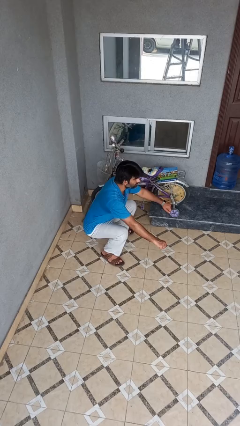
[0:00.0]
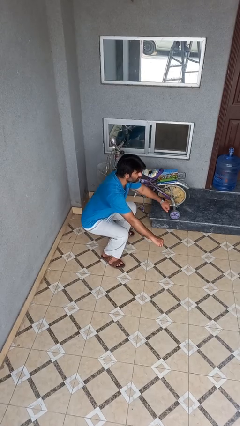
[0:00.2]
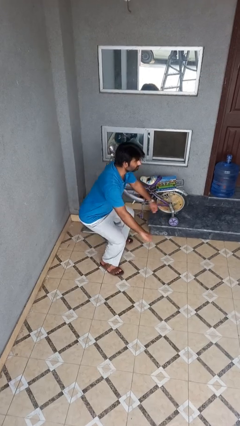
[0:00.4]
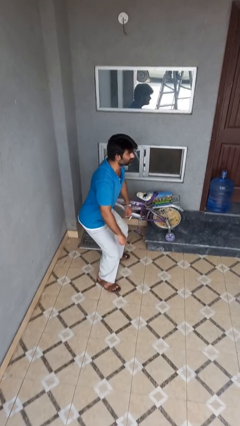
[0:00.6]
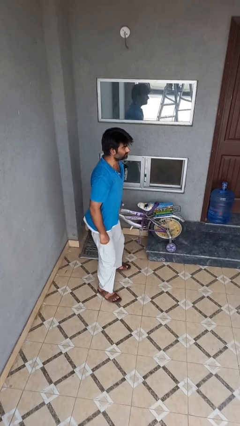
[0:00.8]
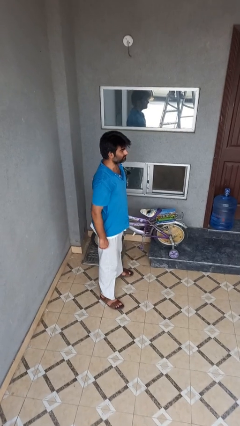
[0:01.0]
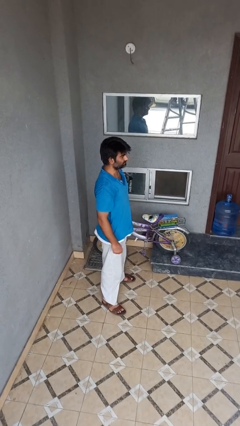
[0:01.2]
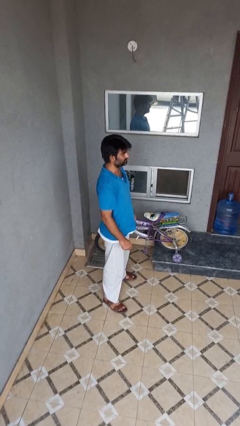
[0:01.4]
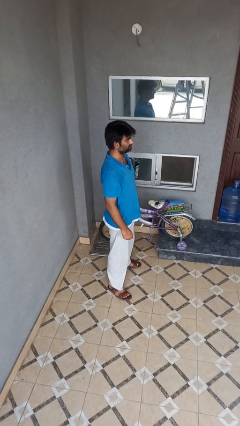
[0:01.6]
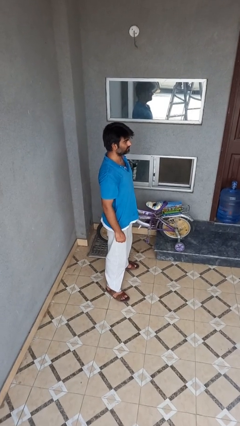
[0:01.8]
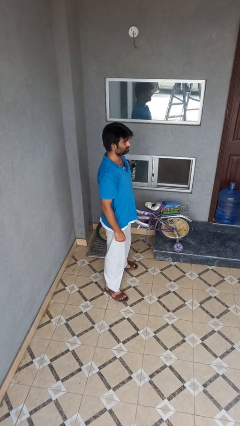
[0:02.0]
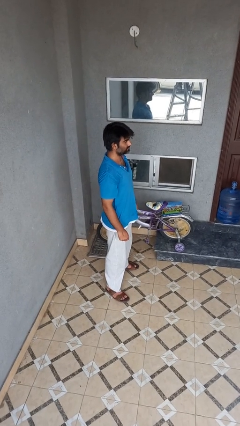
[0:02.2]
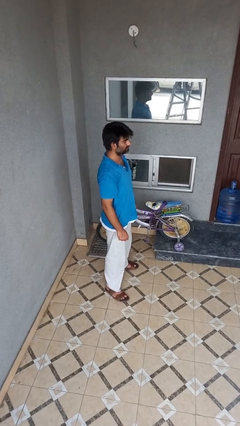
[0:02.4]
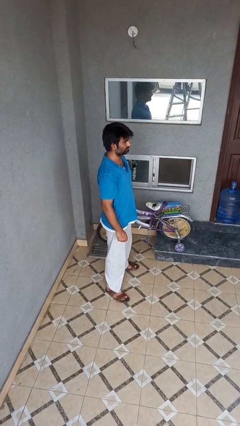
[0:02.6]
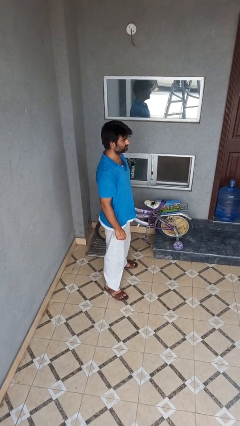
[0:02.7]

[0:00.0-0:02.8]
person stands up

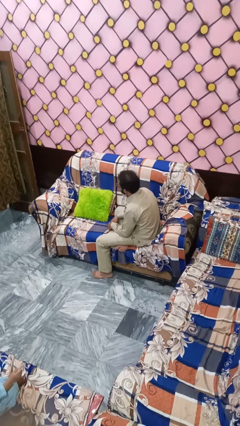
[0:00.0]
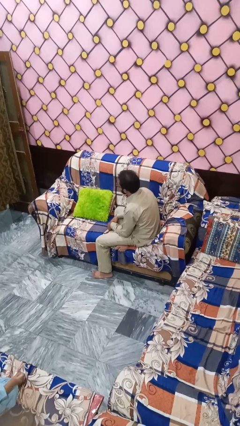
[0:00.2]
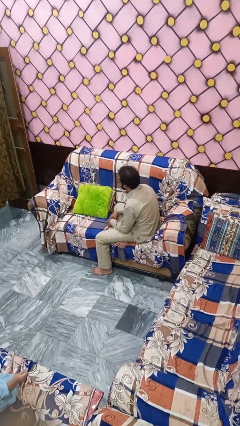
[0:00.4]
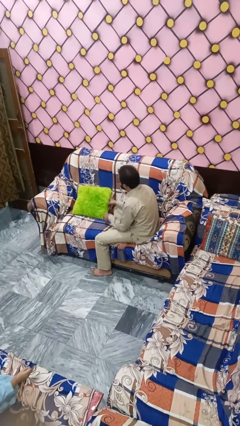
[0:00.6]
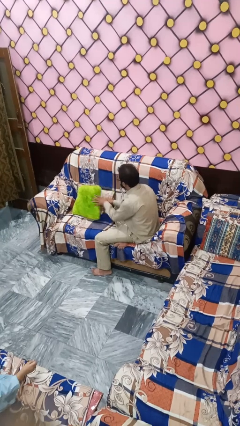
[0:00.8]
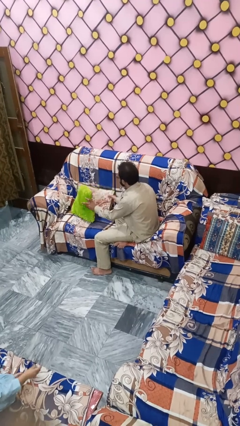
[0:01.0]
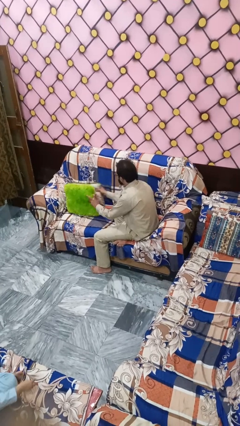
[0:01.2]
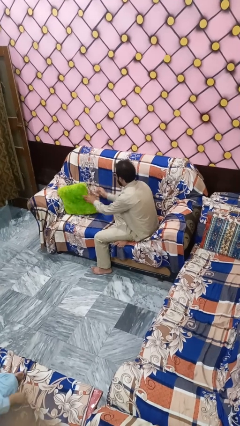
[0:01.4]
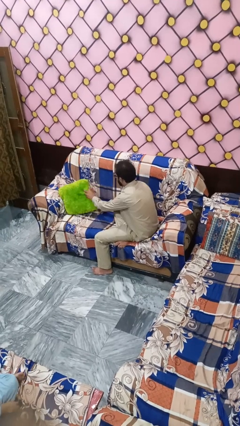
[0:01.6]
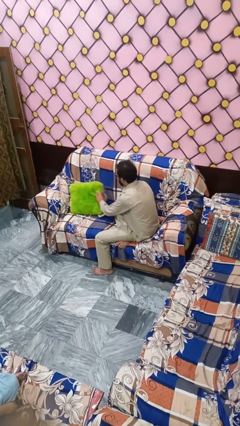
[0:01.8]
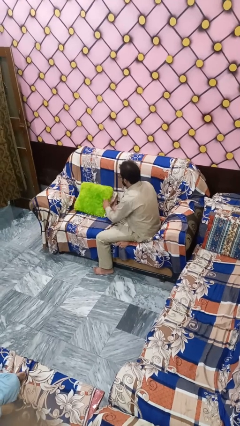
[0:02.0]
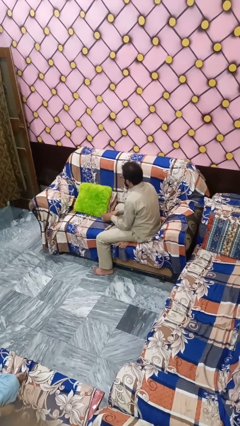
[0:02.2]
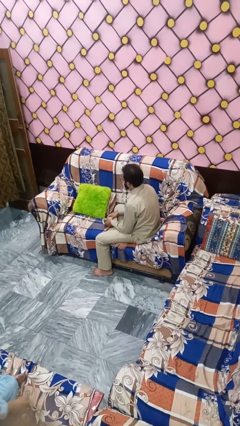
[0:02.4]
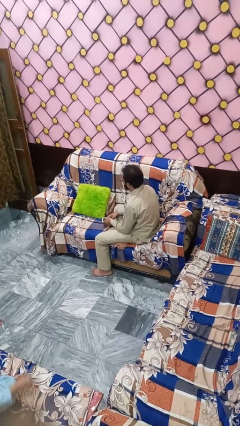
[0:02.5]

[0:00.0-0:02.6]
person searches in couch

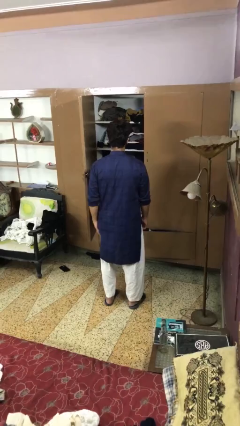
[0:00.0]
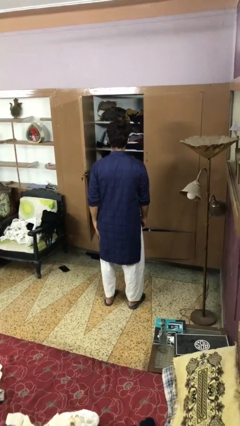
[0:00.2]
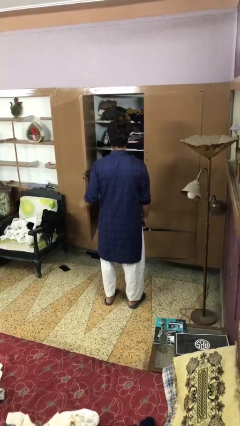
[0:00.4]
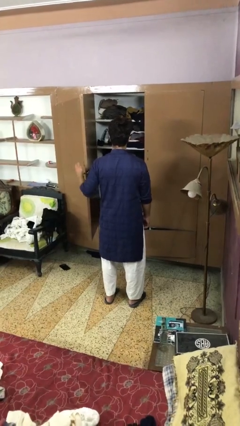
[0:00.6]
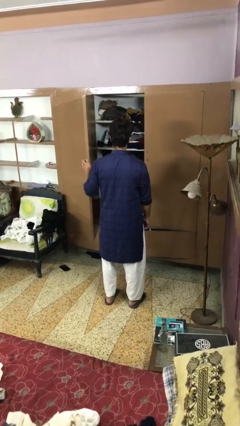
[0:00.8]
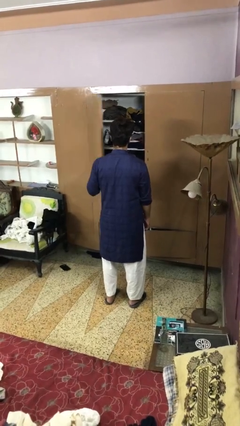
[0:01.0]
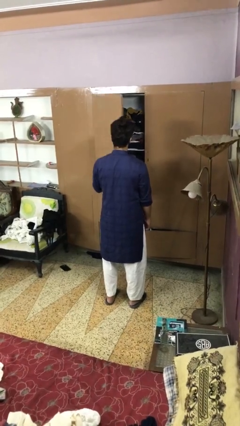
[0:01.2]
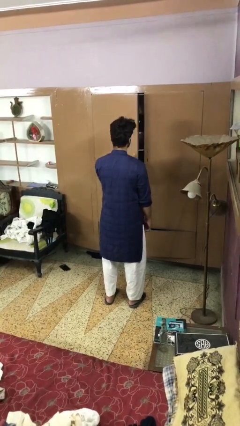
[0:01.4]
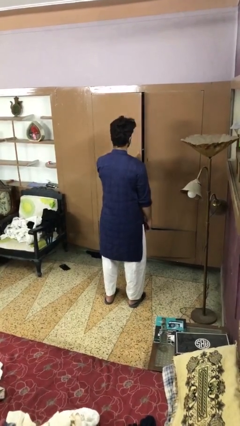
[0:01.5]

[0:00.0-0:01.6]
person closes closet door

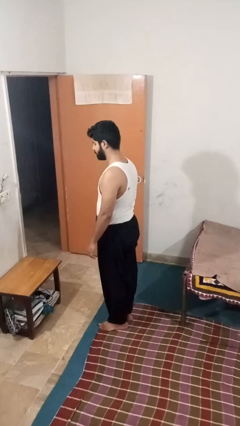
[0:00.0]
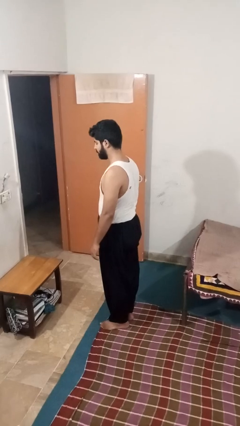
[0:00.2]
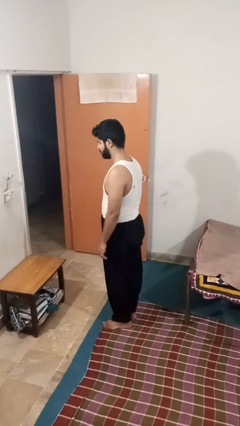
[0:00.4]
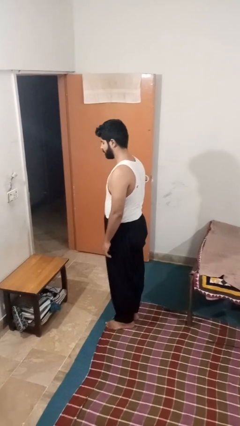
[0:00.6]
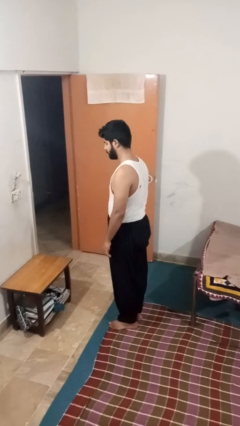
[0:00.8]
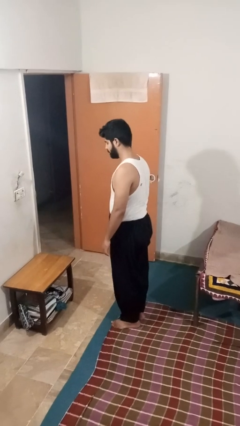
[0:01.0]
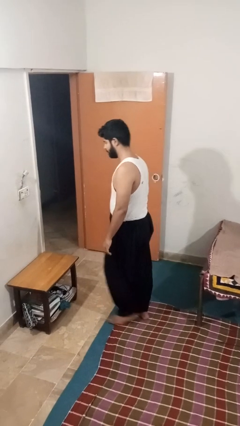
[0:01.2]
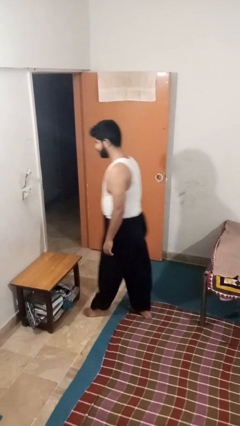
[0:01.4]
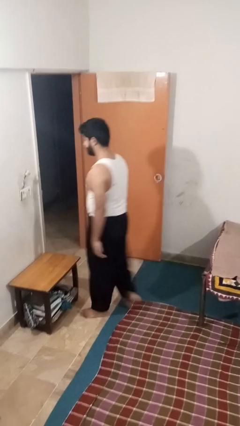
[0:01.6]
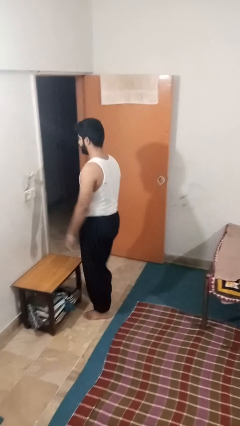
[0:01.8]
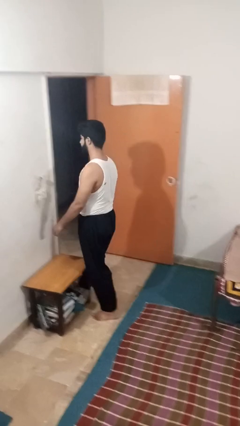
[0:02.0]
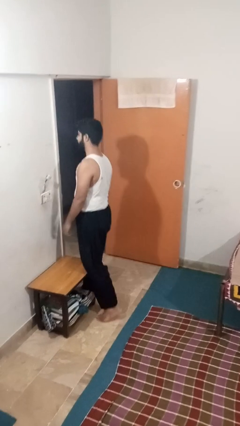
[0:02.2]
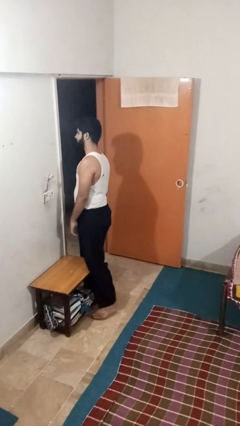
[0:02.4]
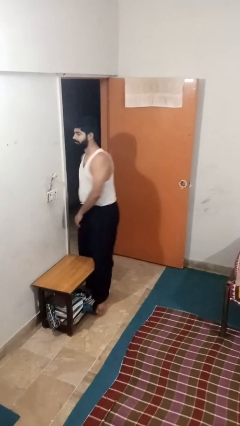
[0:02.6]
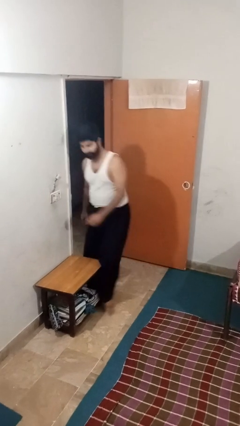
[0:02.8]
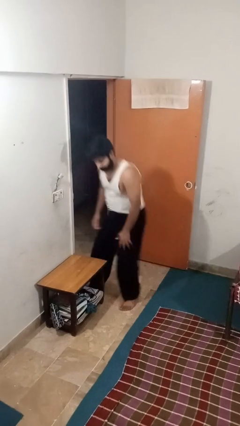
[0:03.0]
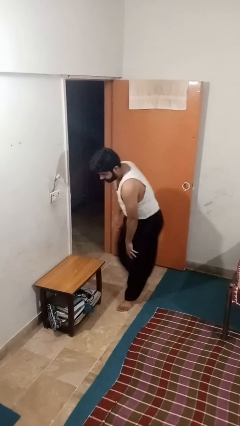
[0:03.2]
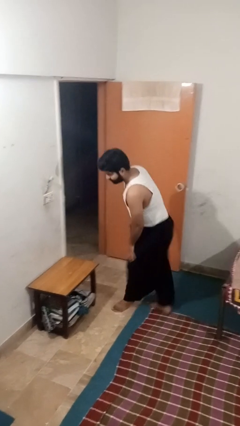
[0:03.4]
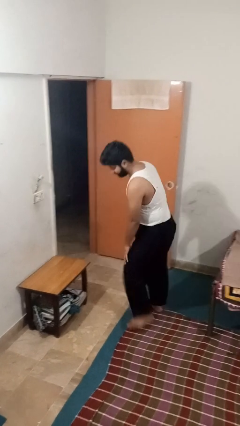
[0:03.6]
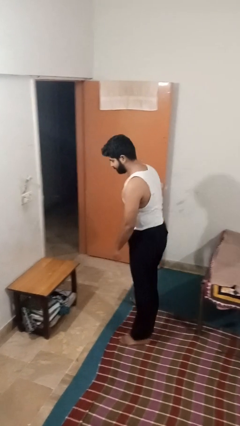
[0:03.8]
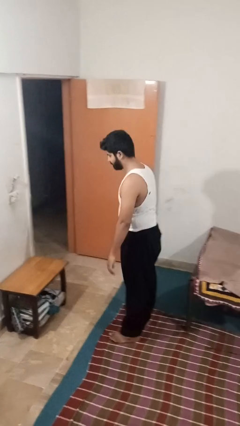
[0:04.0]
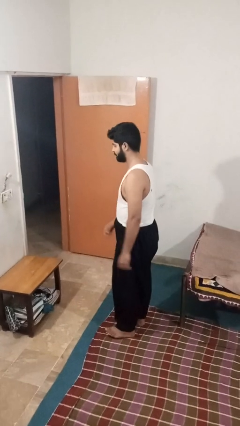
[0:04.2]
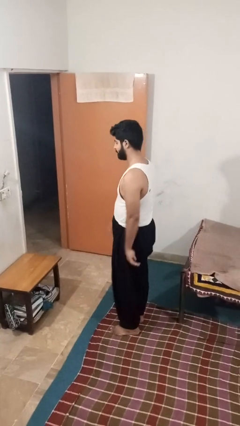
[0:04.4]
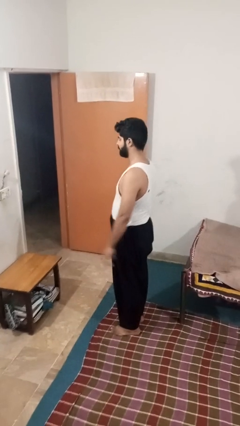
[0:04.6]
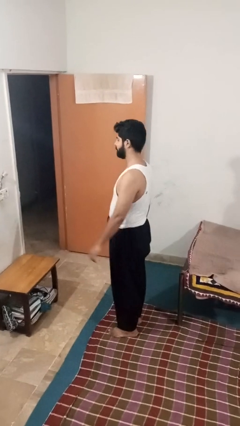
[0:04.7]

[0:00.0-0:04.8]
person bumps into table

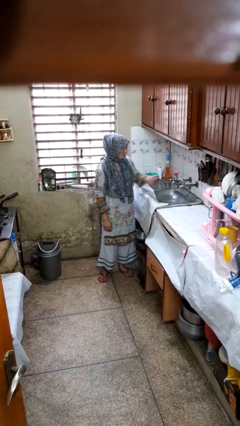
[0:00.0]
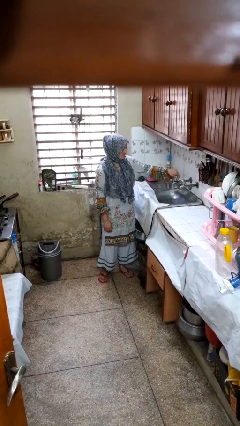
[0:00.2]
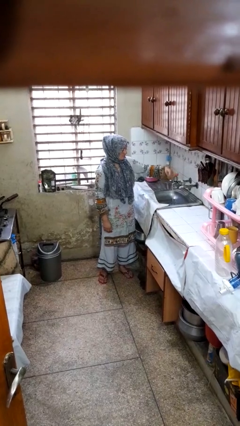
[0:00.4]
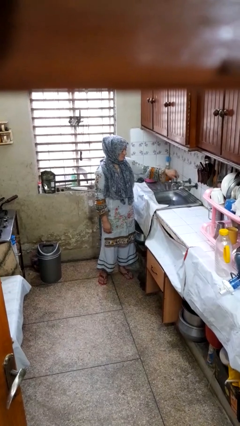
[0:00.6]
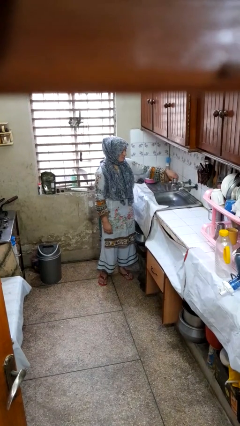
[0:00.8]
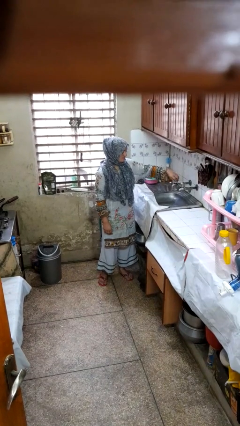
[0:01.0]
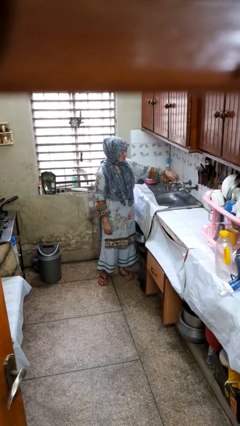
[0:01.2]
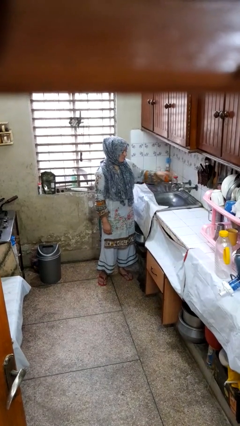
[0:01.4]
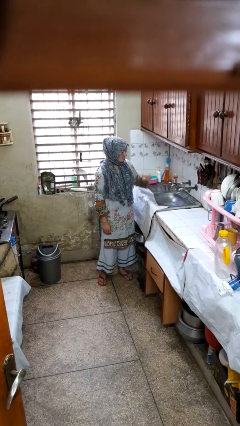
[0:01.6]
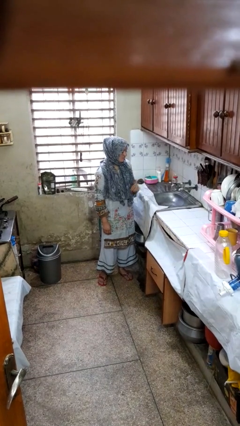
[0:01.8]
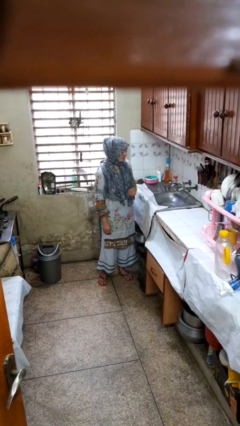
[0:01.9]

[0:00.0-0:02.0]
person turns off faucet

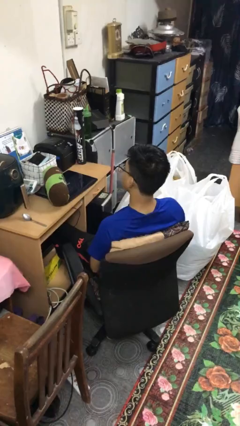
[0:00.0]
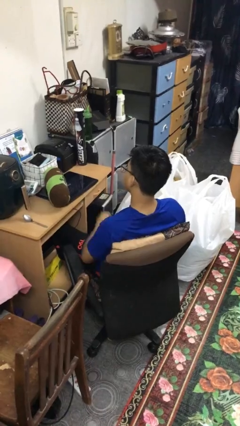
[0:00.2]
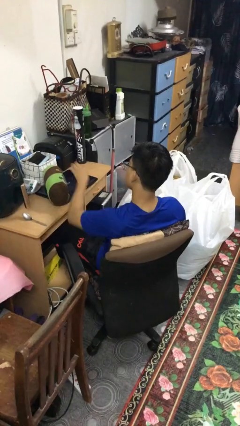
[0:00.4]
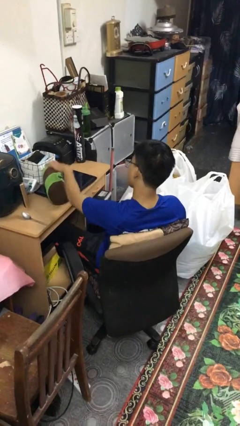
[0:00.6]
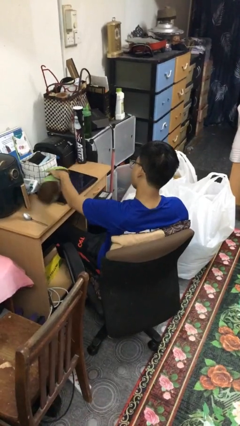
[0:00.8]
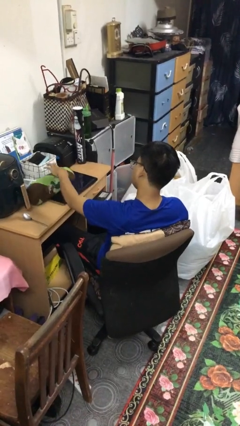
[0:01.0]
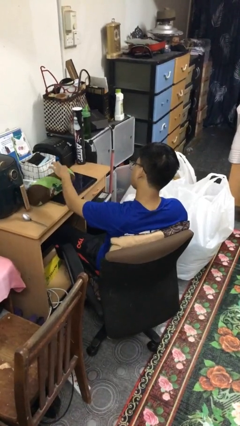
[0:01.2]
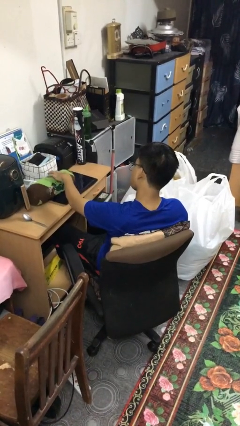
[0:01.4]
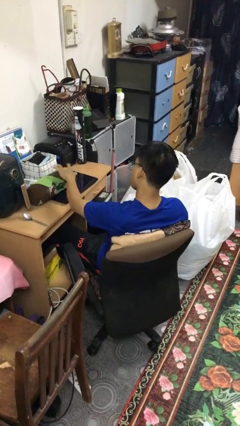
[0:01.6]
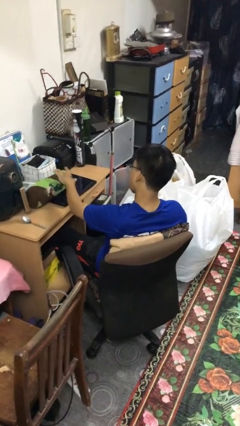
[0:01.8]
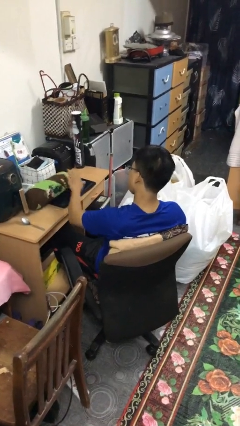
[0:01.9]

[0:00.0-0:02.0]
person taps object with finger

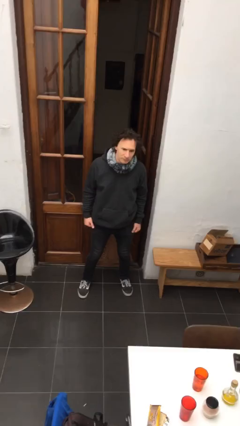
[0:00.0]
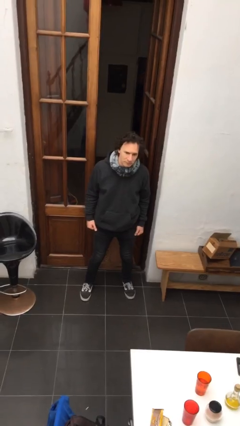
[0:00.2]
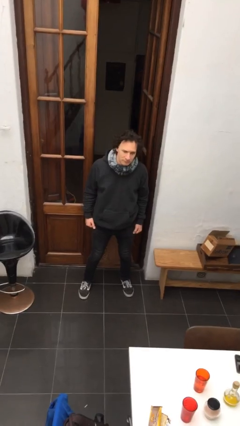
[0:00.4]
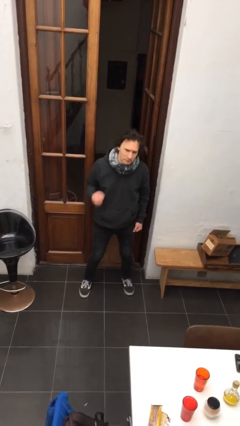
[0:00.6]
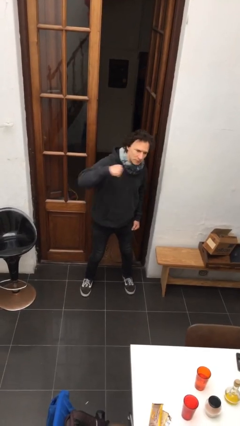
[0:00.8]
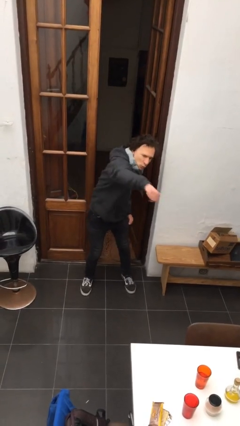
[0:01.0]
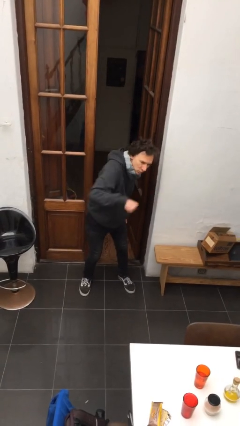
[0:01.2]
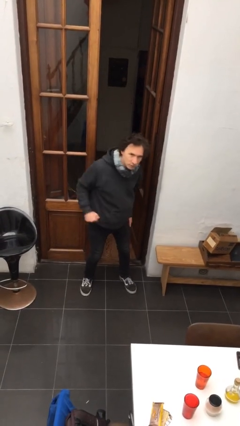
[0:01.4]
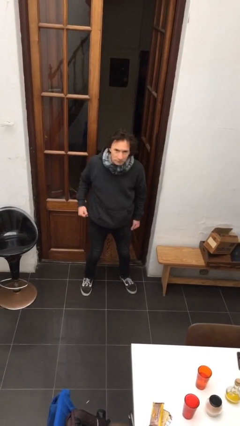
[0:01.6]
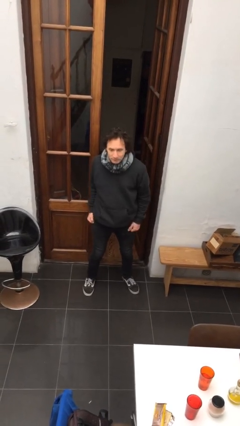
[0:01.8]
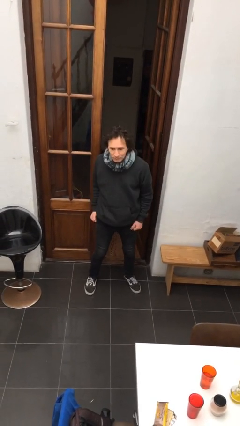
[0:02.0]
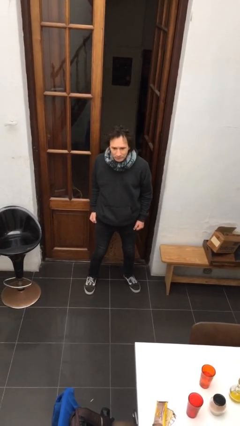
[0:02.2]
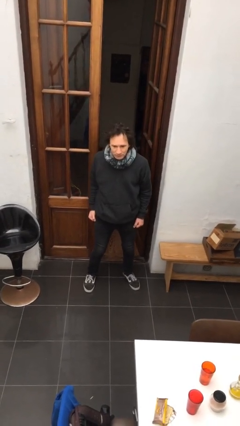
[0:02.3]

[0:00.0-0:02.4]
person punches
